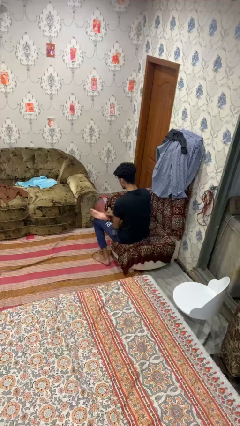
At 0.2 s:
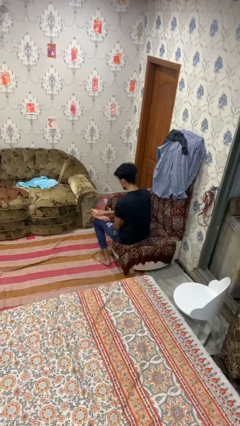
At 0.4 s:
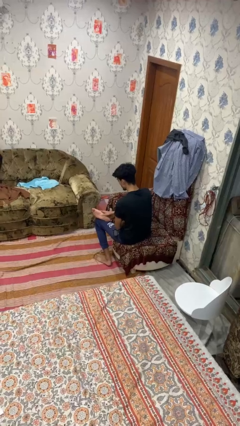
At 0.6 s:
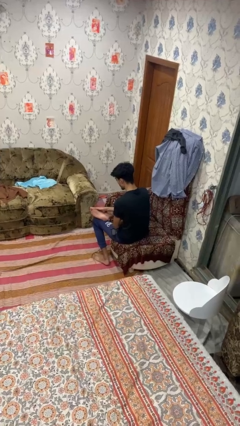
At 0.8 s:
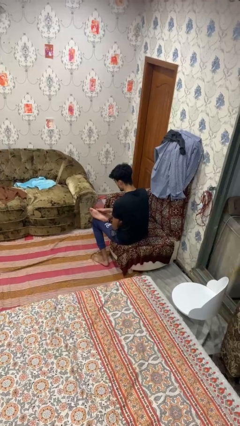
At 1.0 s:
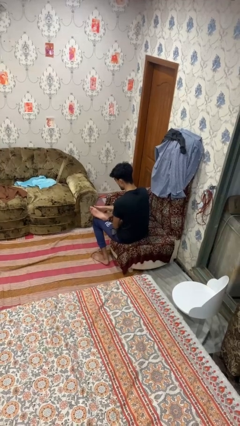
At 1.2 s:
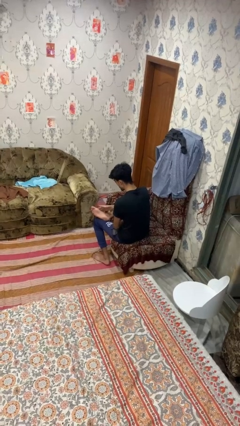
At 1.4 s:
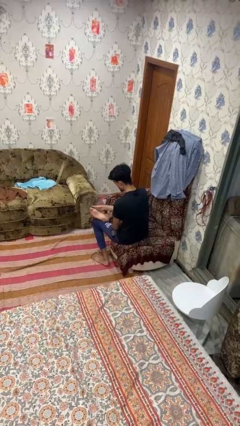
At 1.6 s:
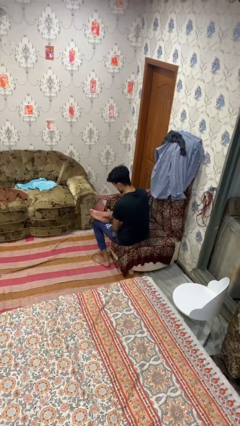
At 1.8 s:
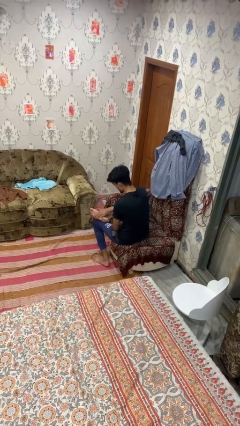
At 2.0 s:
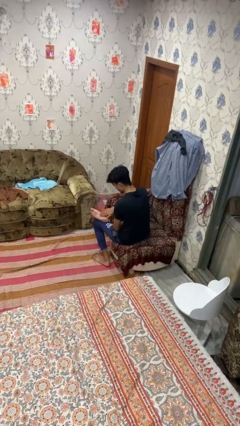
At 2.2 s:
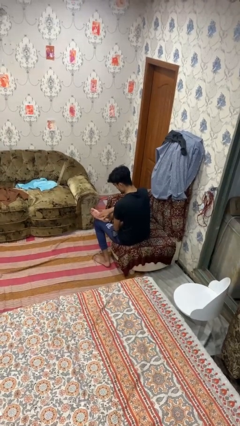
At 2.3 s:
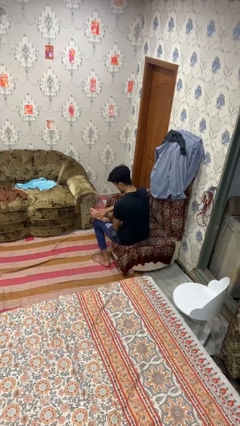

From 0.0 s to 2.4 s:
person rubs foot

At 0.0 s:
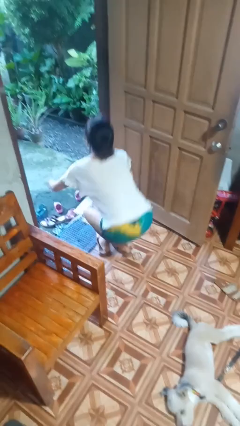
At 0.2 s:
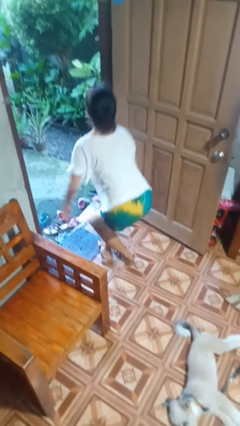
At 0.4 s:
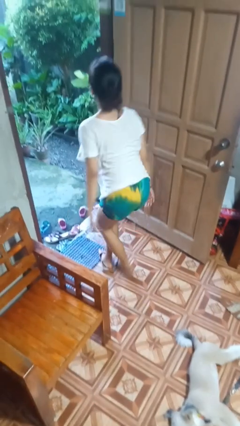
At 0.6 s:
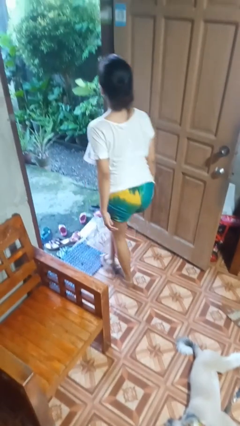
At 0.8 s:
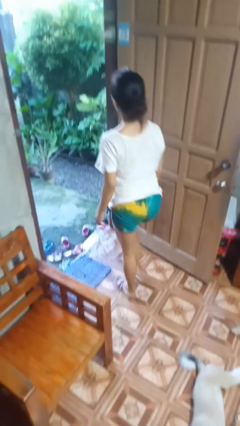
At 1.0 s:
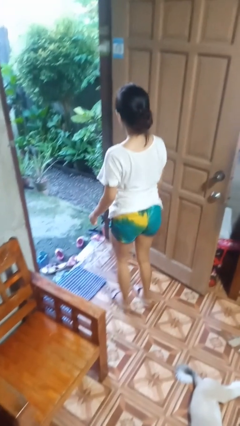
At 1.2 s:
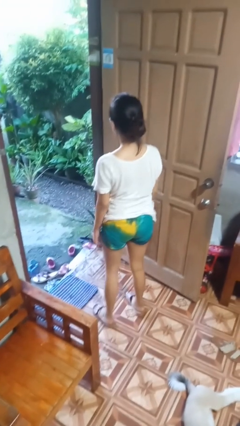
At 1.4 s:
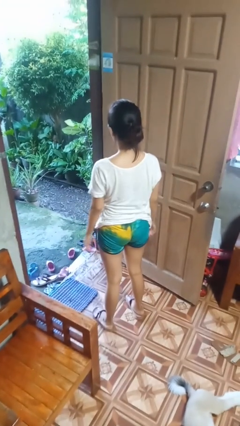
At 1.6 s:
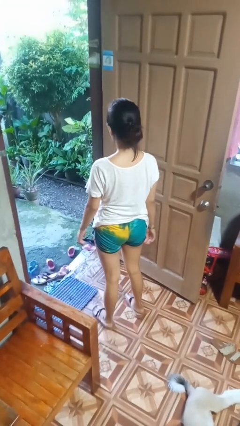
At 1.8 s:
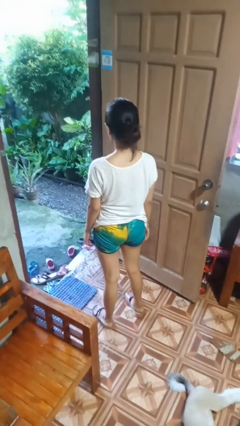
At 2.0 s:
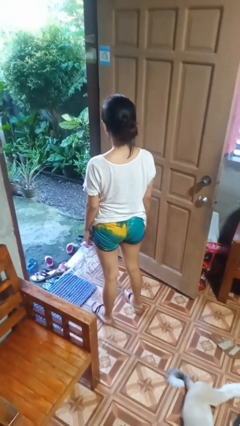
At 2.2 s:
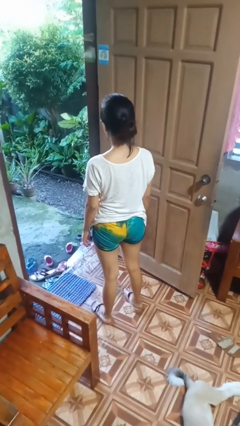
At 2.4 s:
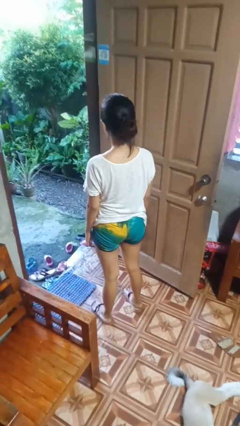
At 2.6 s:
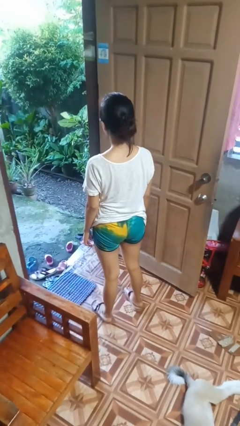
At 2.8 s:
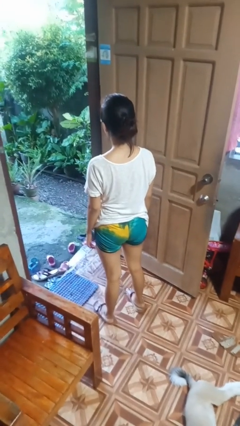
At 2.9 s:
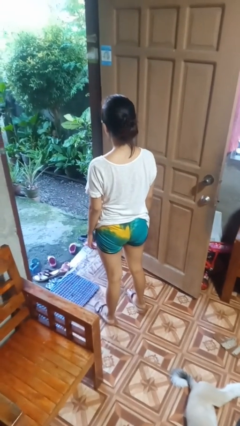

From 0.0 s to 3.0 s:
person stands up from floor

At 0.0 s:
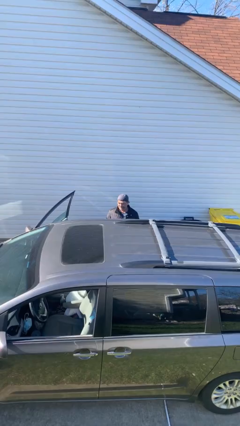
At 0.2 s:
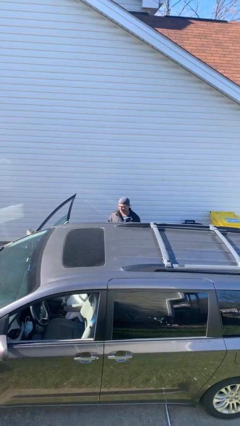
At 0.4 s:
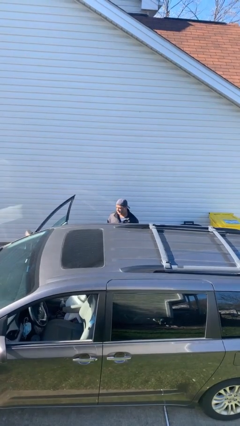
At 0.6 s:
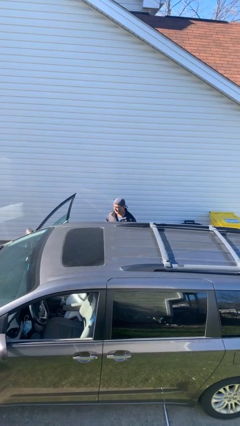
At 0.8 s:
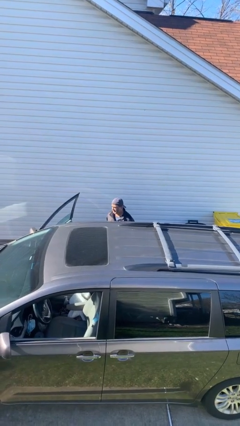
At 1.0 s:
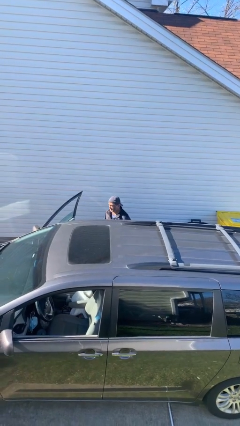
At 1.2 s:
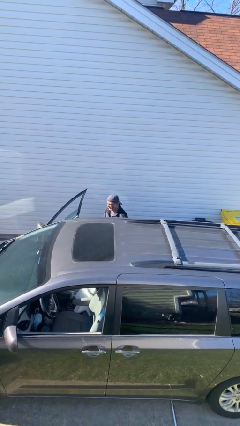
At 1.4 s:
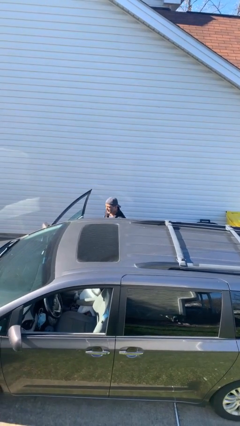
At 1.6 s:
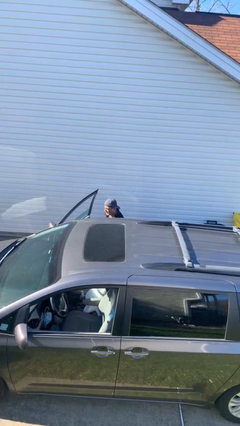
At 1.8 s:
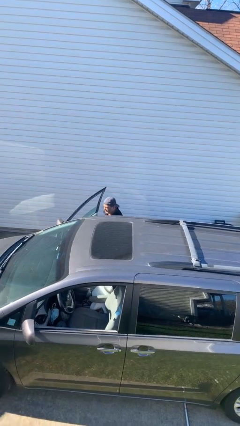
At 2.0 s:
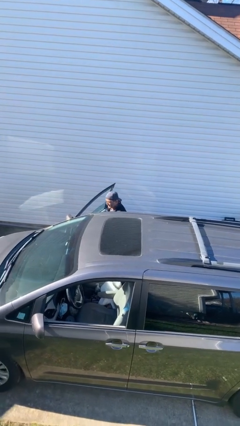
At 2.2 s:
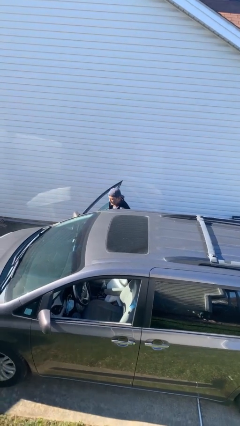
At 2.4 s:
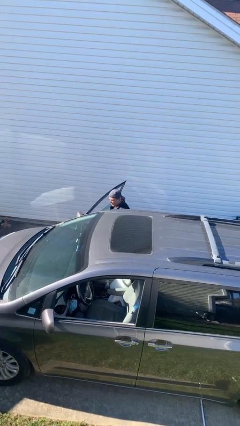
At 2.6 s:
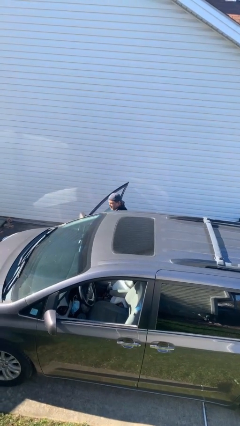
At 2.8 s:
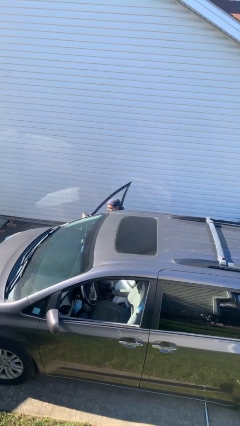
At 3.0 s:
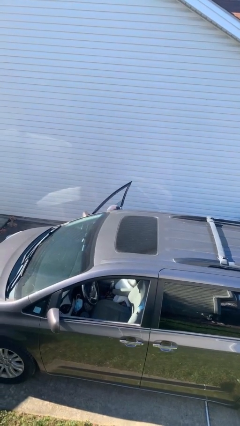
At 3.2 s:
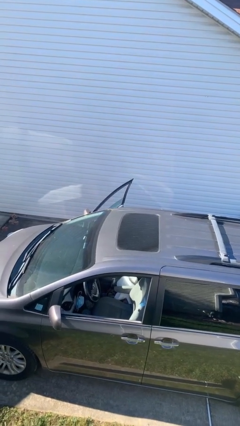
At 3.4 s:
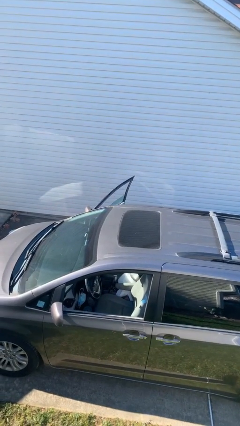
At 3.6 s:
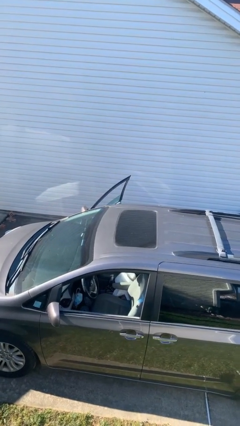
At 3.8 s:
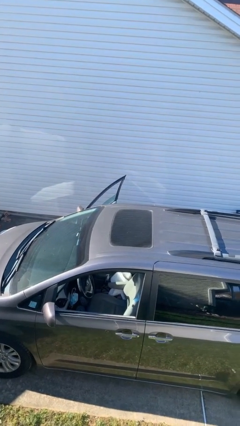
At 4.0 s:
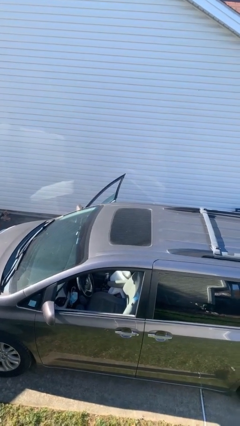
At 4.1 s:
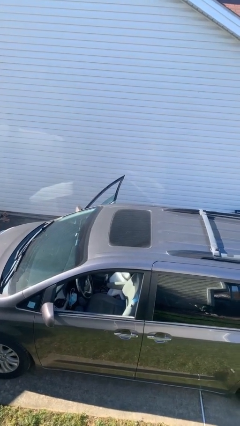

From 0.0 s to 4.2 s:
person enters car

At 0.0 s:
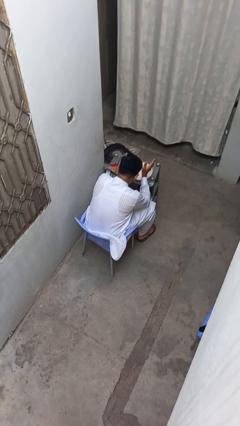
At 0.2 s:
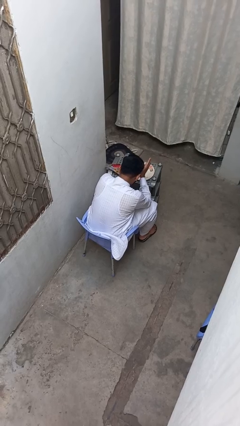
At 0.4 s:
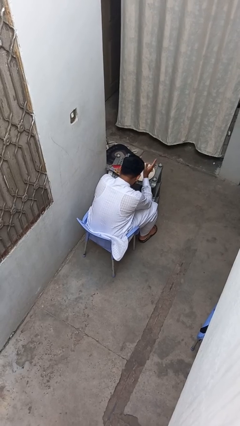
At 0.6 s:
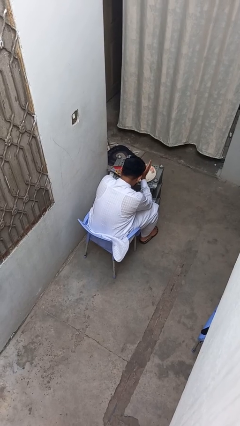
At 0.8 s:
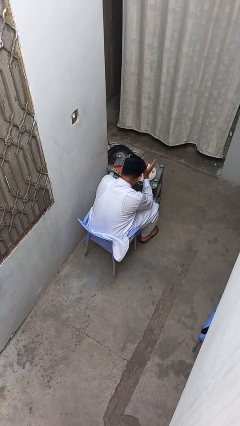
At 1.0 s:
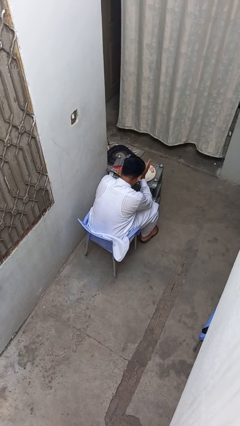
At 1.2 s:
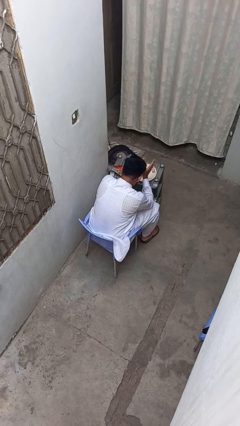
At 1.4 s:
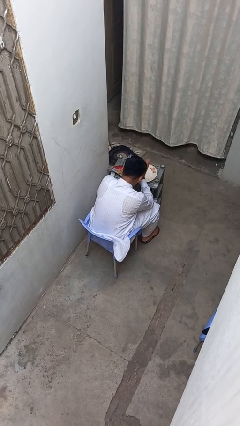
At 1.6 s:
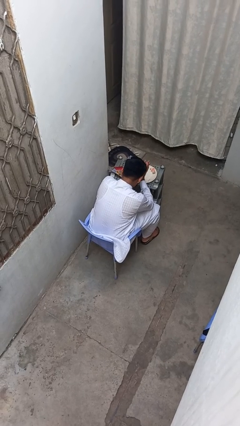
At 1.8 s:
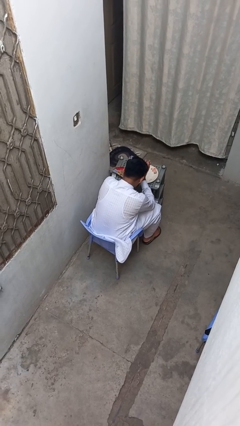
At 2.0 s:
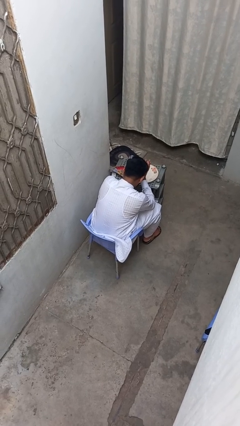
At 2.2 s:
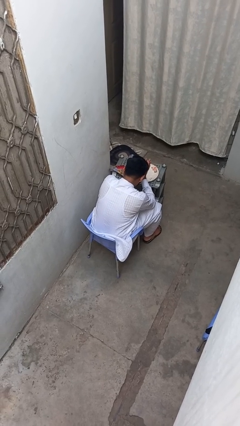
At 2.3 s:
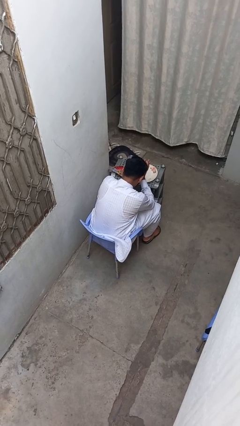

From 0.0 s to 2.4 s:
person claps hands

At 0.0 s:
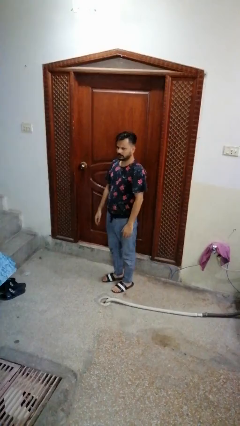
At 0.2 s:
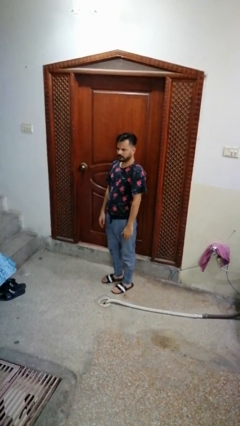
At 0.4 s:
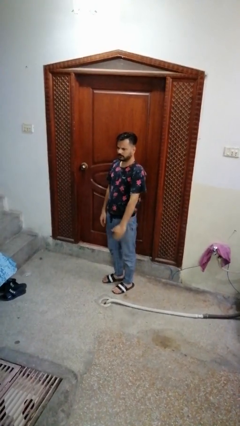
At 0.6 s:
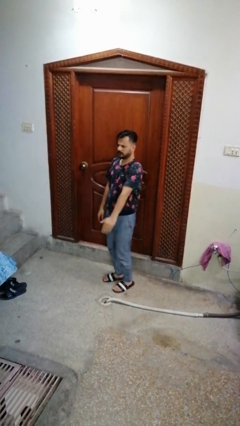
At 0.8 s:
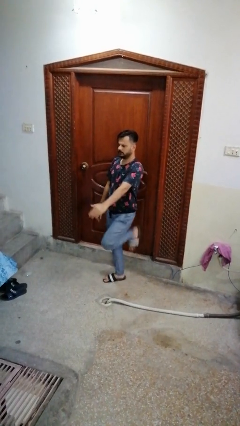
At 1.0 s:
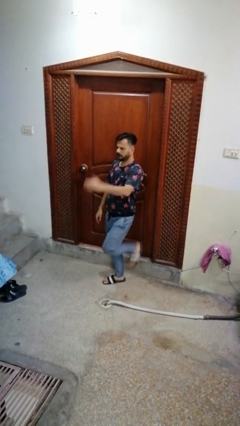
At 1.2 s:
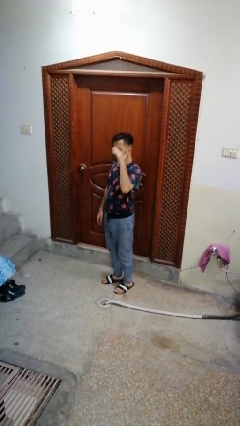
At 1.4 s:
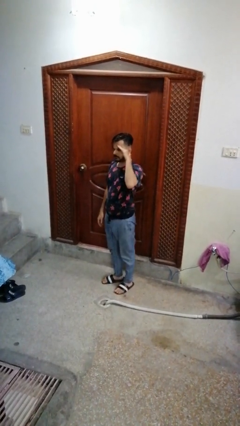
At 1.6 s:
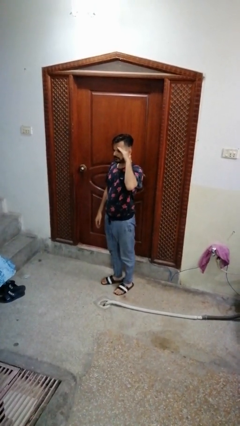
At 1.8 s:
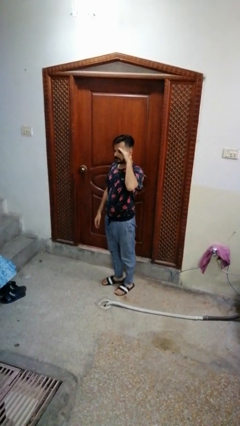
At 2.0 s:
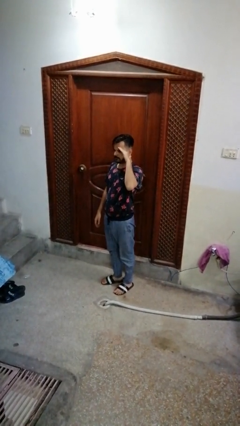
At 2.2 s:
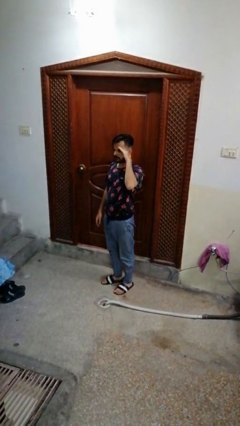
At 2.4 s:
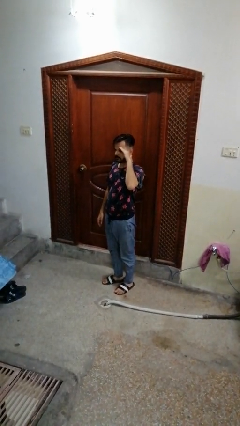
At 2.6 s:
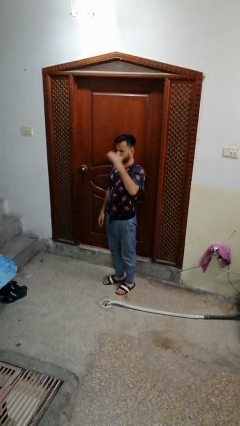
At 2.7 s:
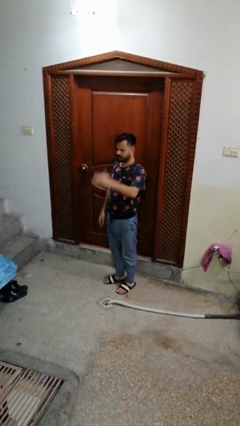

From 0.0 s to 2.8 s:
person salutes

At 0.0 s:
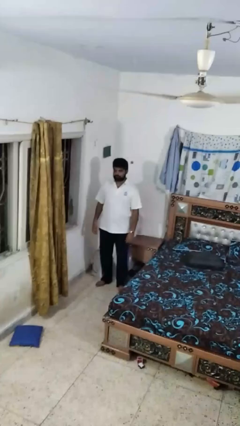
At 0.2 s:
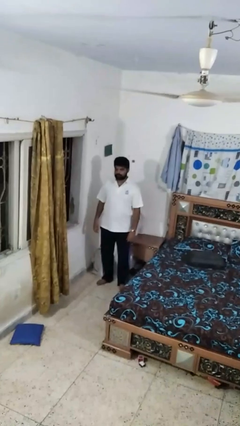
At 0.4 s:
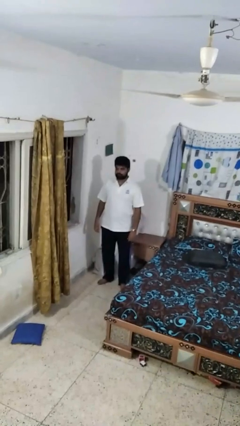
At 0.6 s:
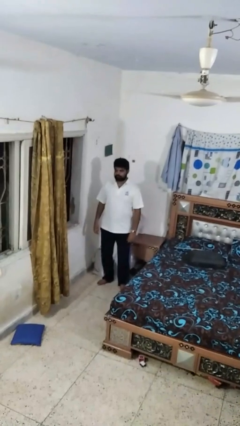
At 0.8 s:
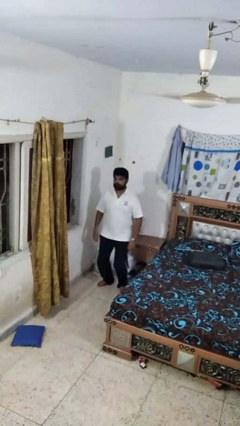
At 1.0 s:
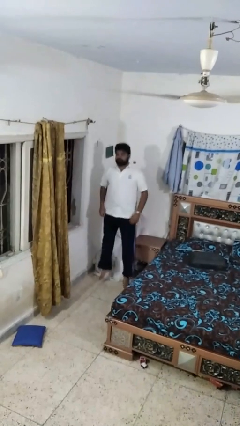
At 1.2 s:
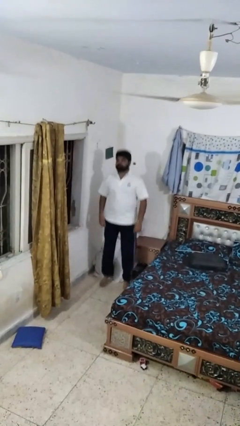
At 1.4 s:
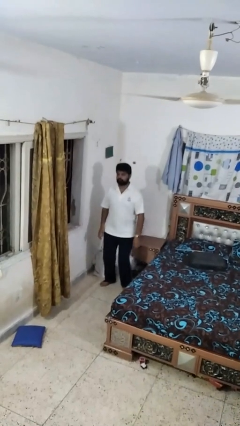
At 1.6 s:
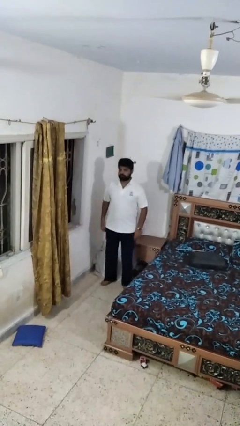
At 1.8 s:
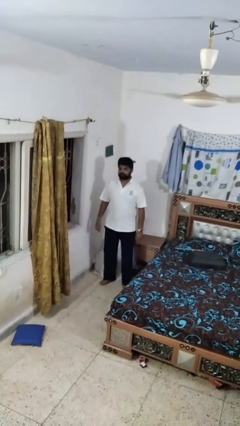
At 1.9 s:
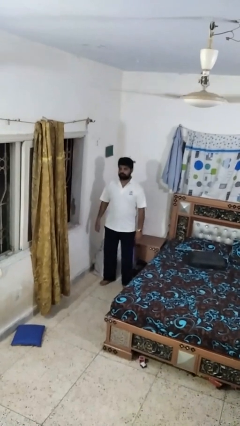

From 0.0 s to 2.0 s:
person jumps

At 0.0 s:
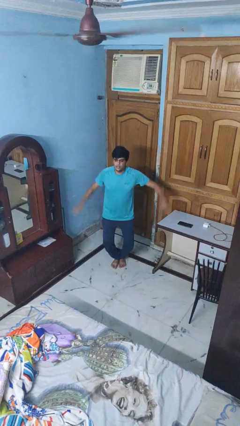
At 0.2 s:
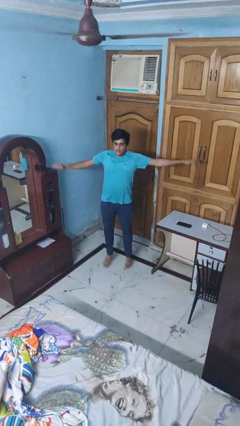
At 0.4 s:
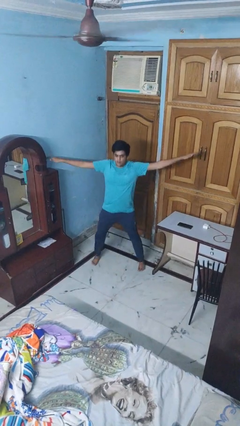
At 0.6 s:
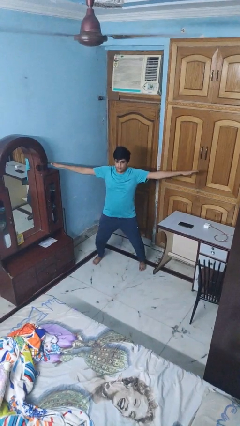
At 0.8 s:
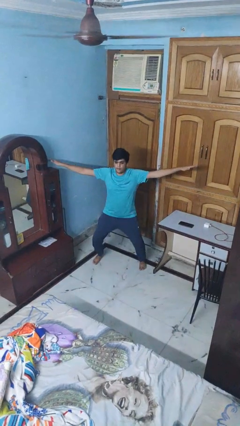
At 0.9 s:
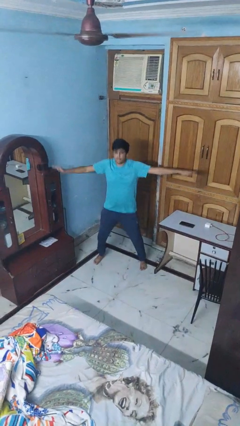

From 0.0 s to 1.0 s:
person exercises with jumping jacks
